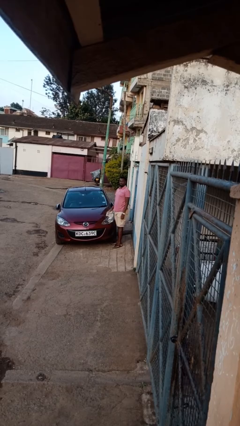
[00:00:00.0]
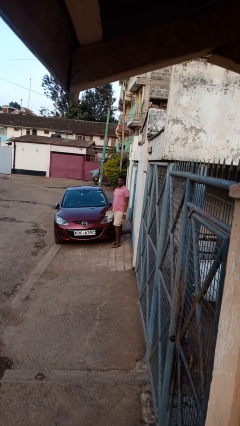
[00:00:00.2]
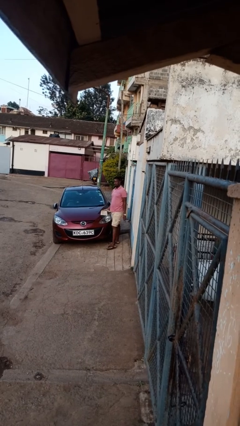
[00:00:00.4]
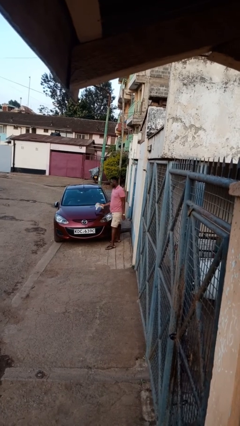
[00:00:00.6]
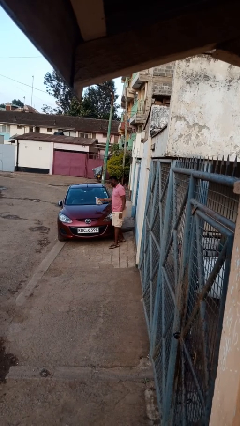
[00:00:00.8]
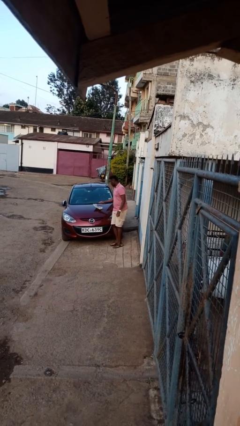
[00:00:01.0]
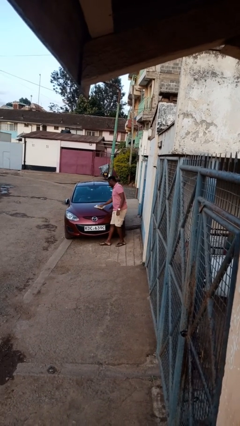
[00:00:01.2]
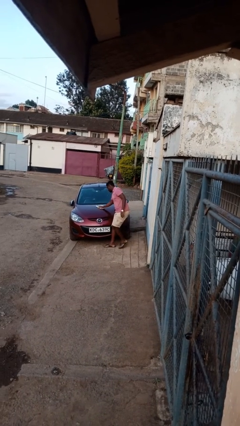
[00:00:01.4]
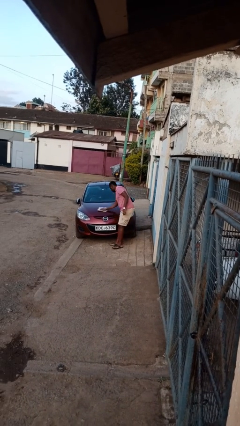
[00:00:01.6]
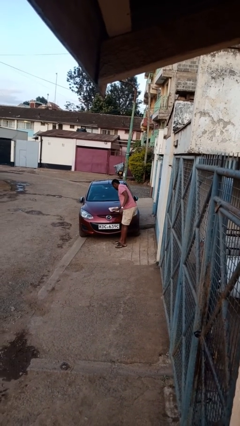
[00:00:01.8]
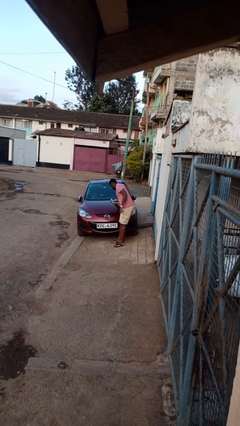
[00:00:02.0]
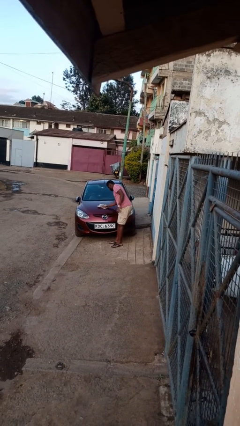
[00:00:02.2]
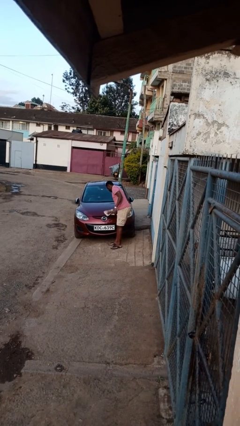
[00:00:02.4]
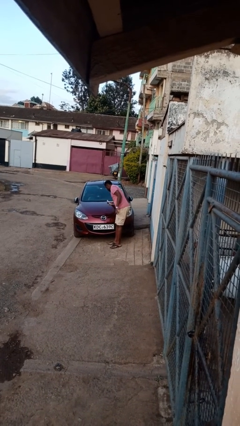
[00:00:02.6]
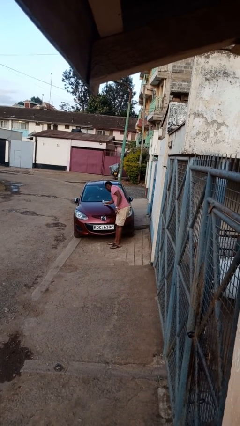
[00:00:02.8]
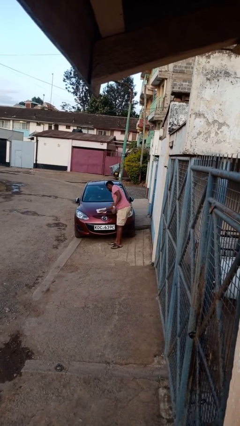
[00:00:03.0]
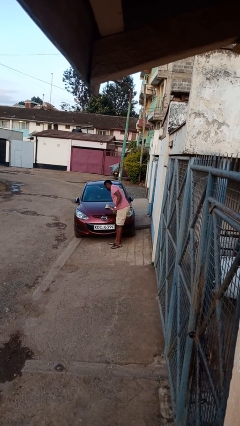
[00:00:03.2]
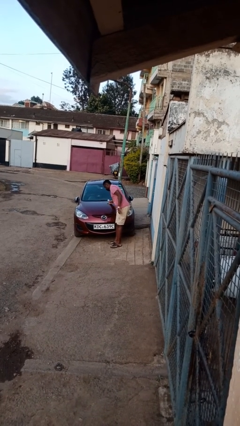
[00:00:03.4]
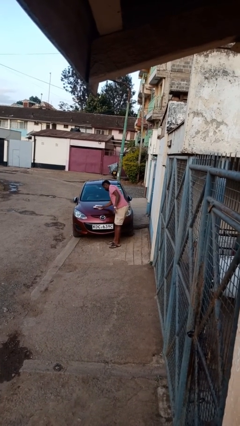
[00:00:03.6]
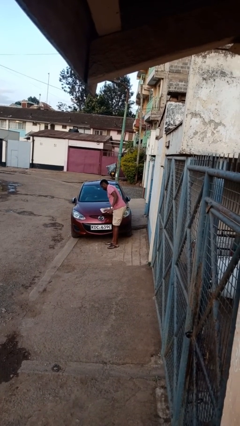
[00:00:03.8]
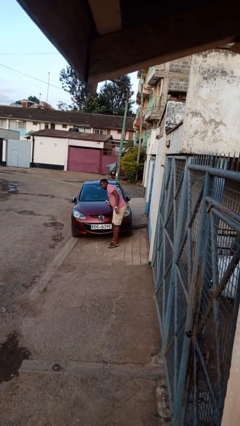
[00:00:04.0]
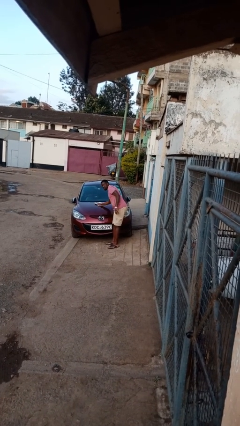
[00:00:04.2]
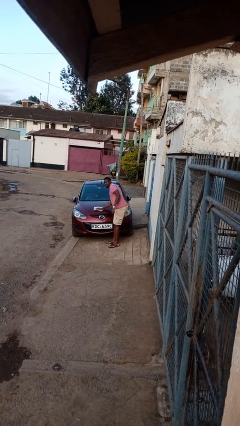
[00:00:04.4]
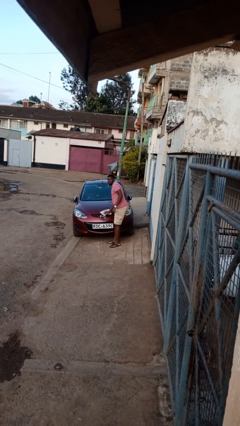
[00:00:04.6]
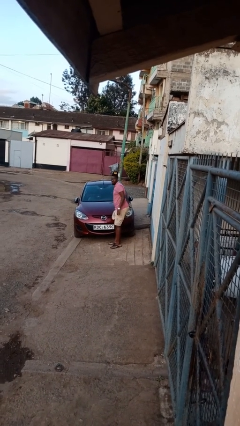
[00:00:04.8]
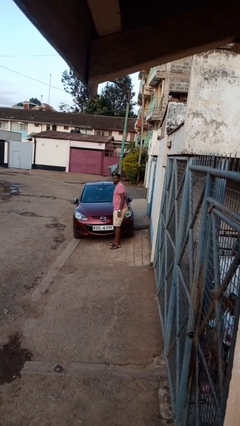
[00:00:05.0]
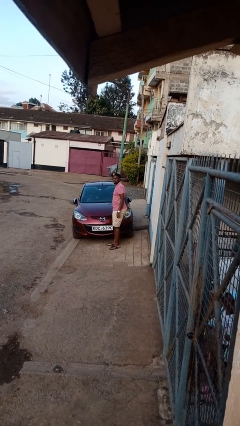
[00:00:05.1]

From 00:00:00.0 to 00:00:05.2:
person polishes car with rag

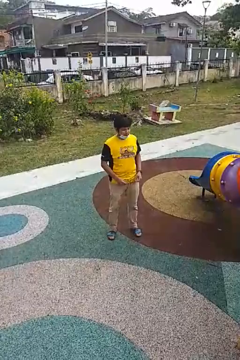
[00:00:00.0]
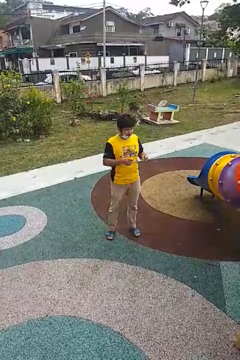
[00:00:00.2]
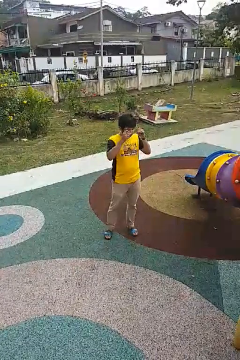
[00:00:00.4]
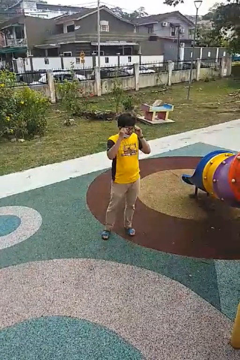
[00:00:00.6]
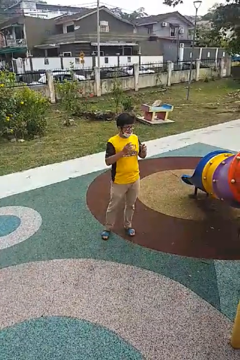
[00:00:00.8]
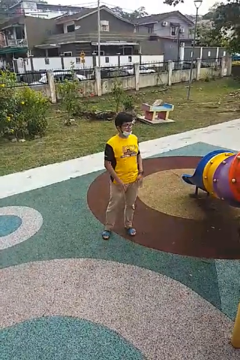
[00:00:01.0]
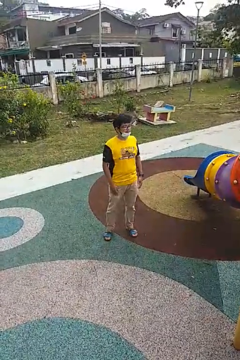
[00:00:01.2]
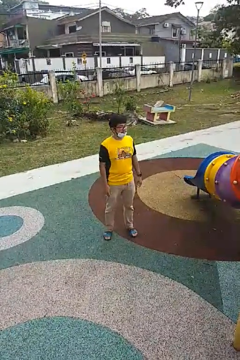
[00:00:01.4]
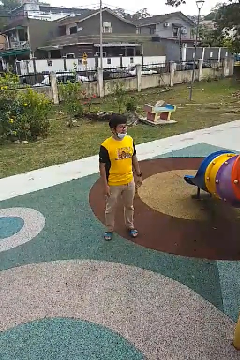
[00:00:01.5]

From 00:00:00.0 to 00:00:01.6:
person puts on glasses

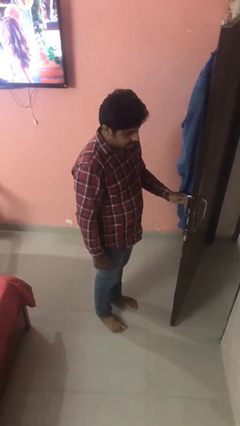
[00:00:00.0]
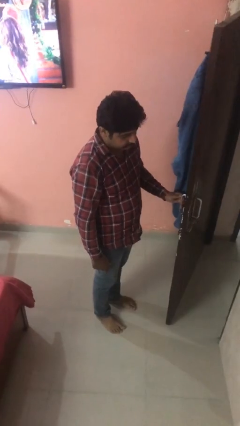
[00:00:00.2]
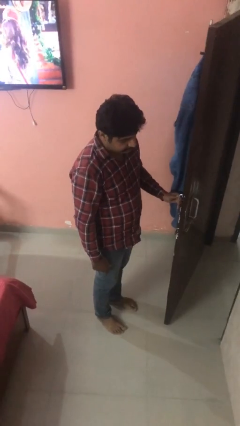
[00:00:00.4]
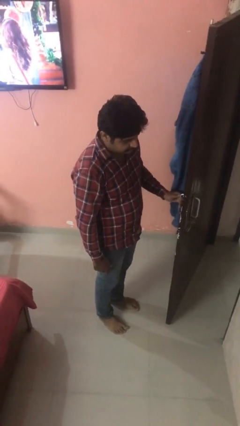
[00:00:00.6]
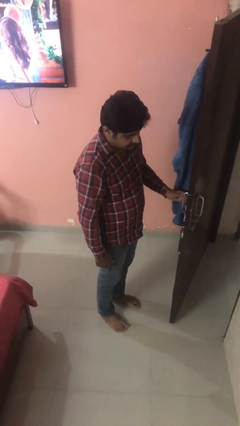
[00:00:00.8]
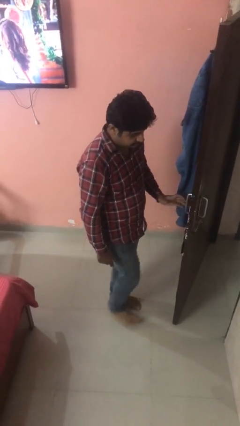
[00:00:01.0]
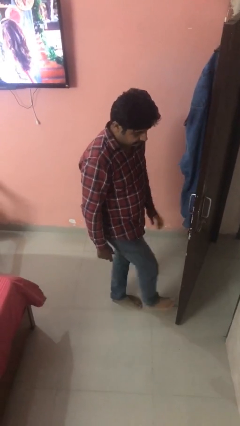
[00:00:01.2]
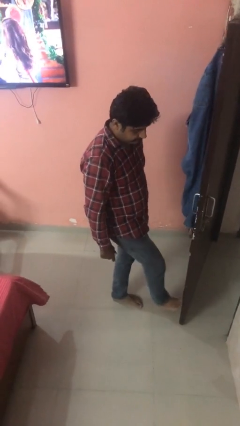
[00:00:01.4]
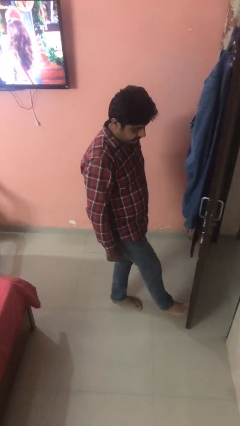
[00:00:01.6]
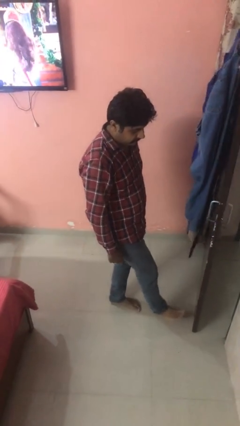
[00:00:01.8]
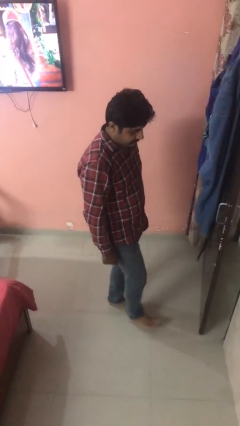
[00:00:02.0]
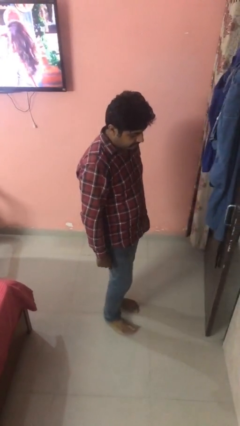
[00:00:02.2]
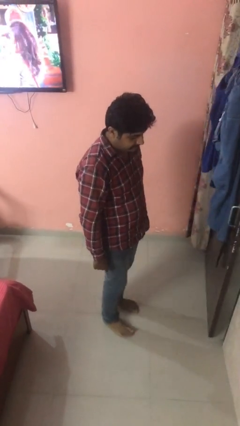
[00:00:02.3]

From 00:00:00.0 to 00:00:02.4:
person closes door with foot

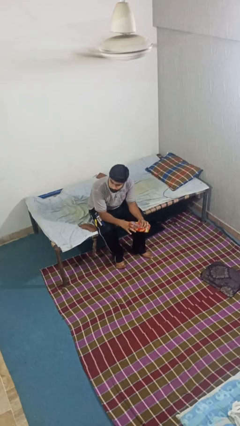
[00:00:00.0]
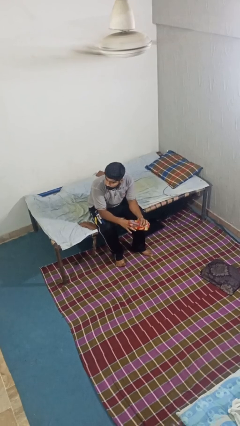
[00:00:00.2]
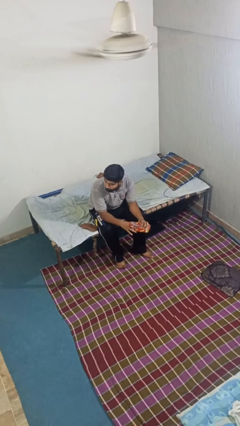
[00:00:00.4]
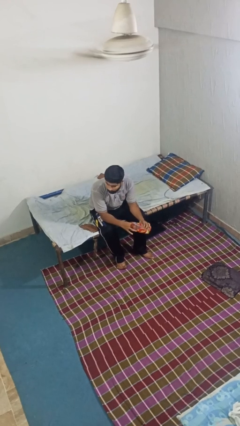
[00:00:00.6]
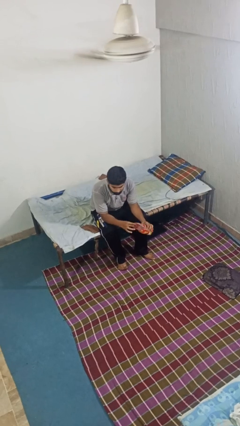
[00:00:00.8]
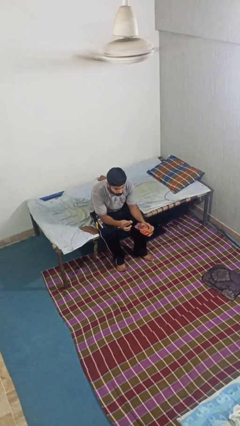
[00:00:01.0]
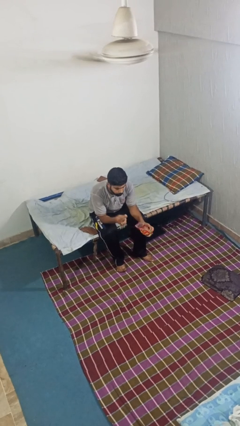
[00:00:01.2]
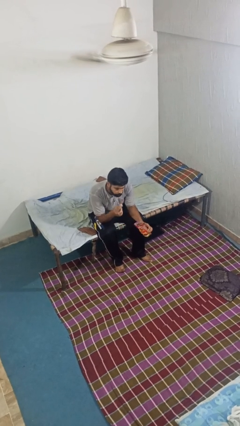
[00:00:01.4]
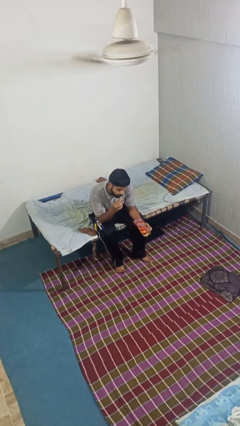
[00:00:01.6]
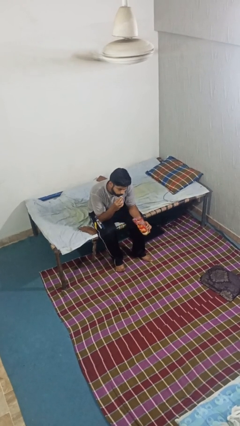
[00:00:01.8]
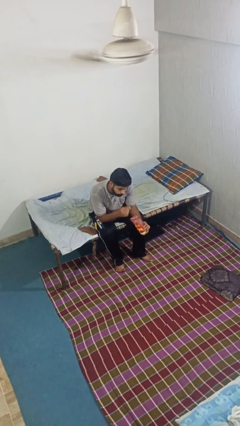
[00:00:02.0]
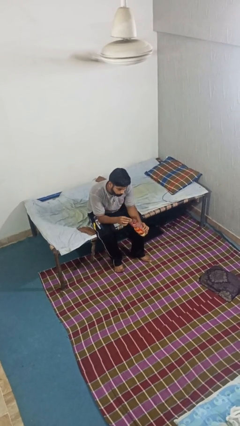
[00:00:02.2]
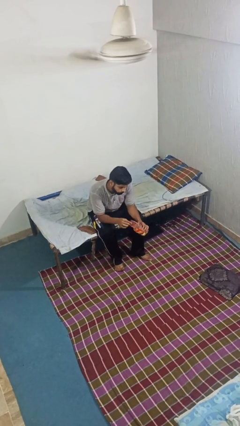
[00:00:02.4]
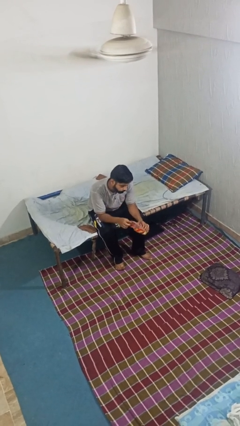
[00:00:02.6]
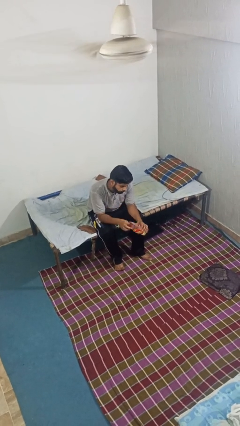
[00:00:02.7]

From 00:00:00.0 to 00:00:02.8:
person eats snack from bag

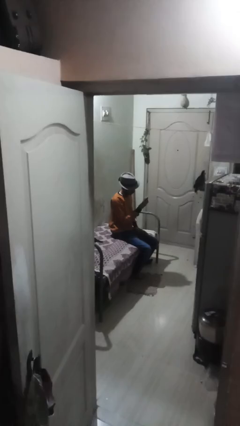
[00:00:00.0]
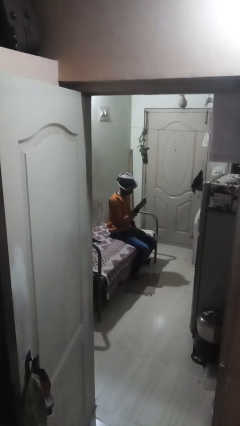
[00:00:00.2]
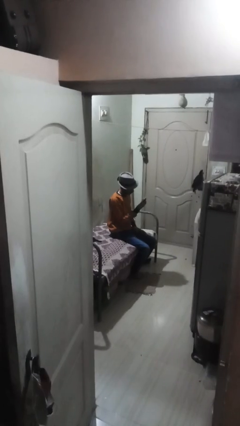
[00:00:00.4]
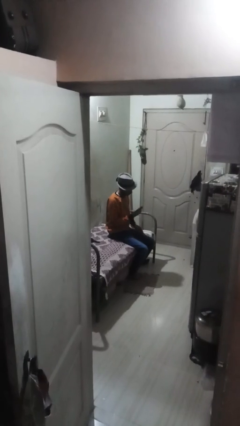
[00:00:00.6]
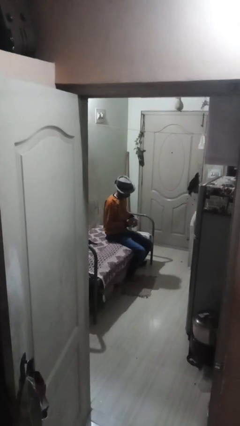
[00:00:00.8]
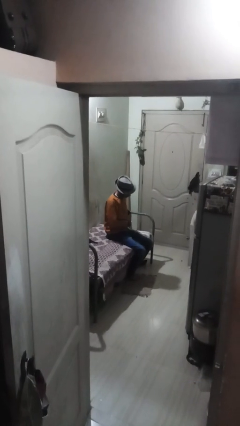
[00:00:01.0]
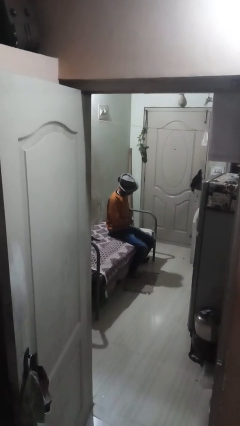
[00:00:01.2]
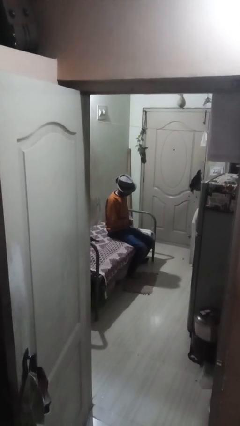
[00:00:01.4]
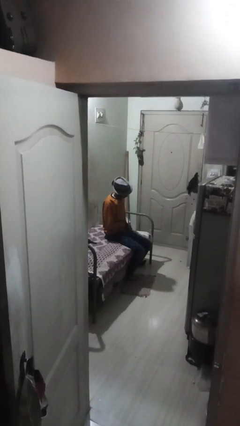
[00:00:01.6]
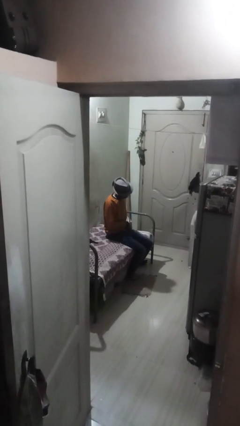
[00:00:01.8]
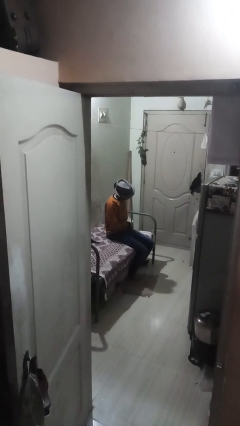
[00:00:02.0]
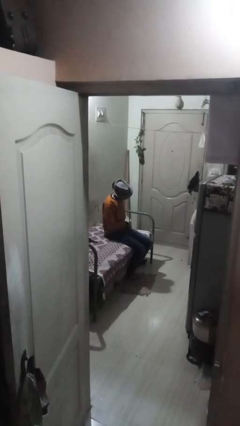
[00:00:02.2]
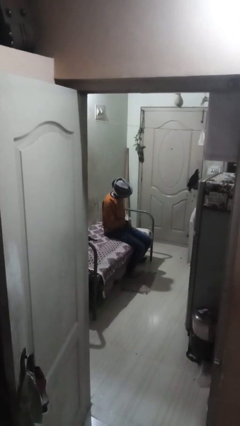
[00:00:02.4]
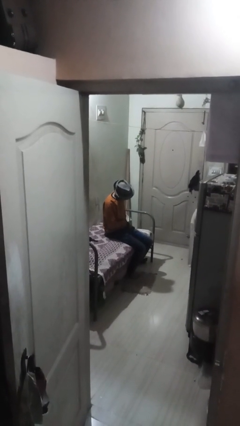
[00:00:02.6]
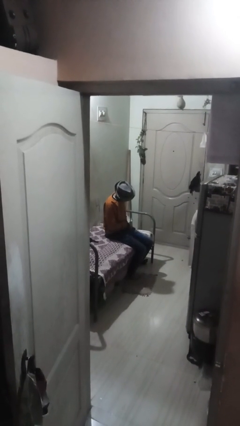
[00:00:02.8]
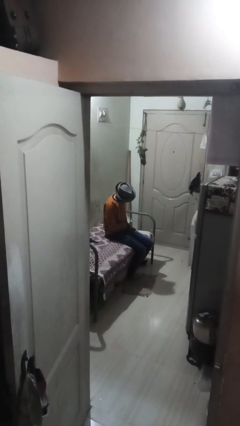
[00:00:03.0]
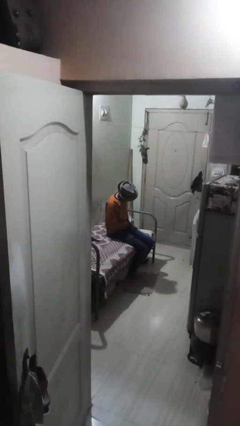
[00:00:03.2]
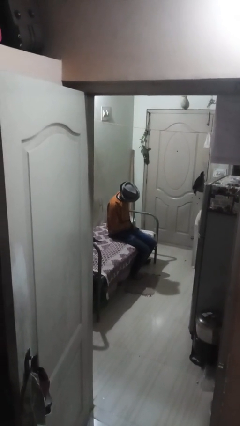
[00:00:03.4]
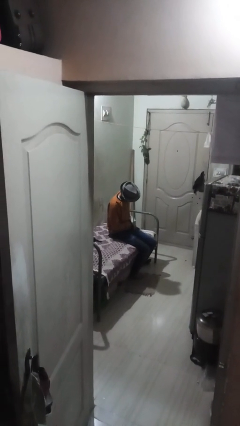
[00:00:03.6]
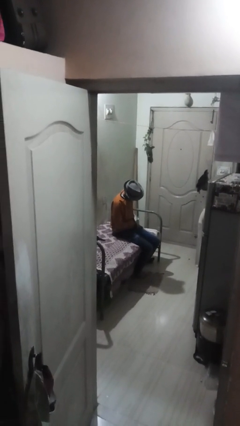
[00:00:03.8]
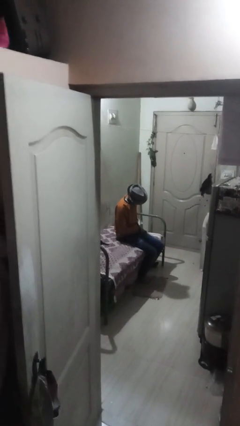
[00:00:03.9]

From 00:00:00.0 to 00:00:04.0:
person puts phone into pocket

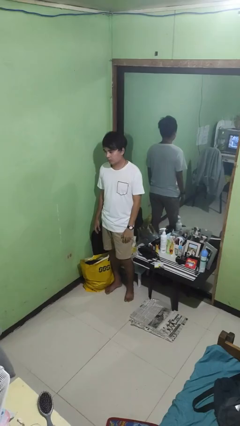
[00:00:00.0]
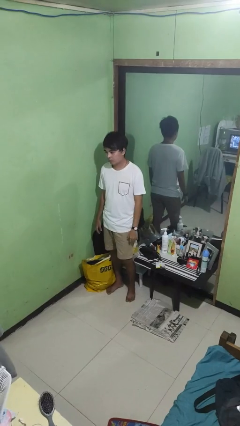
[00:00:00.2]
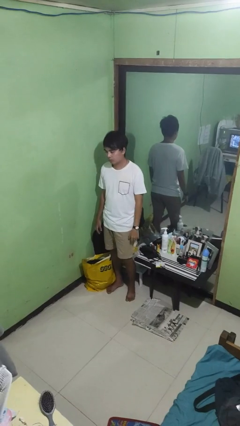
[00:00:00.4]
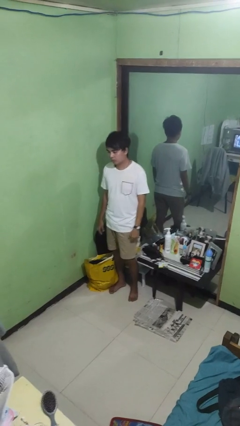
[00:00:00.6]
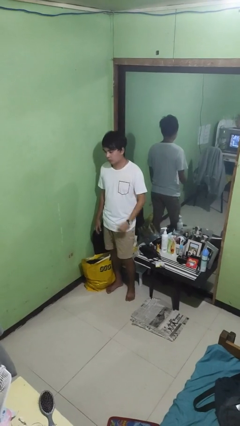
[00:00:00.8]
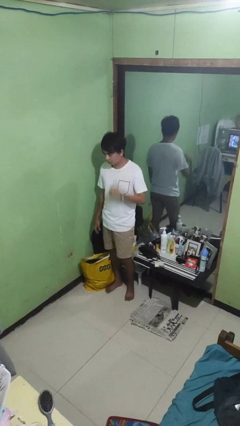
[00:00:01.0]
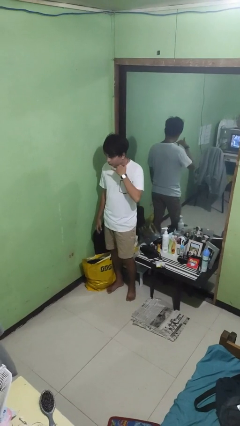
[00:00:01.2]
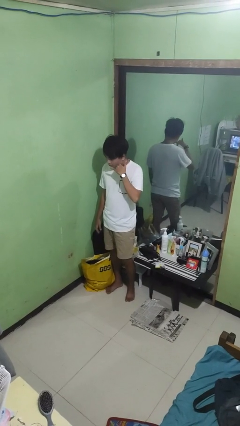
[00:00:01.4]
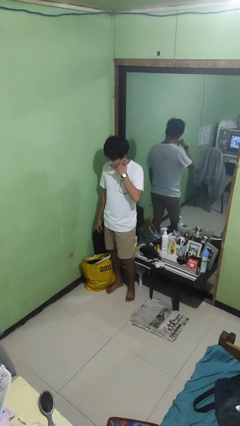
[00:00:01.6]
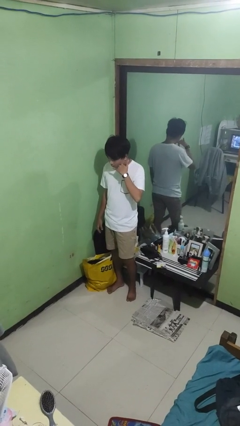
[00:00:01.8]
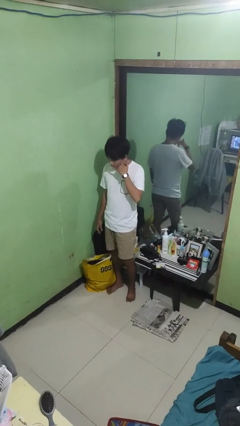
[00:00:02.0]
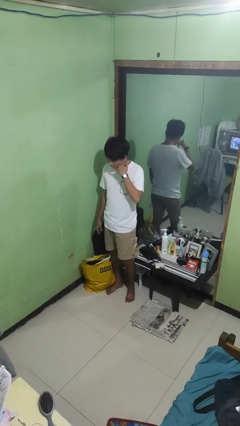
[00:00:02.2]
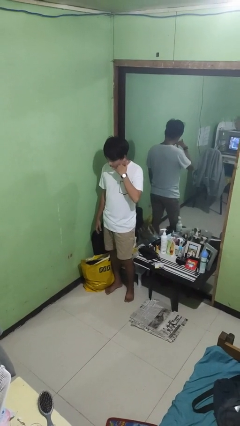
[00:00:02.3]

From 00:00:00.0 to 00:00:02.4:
person gestures call me
